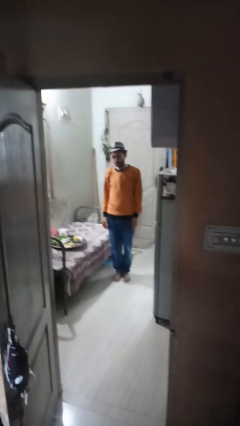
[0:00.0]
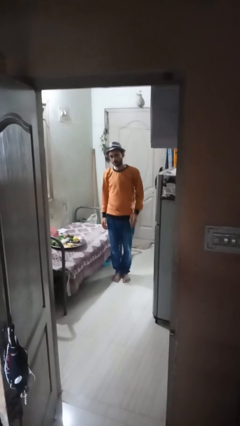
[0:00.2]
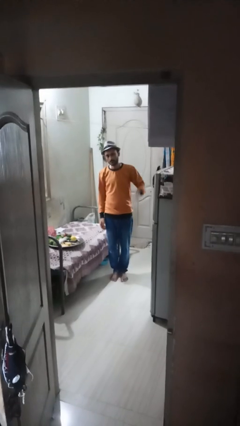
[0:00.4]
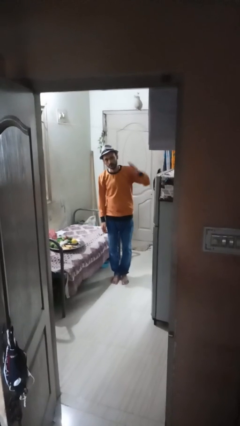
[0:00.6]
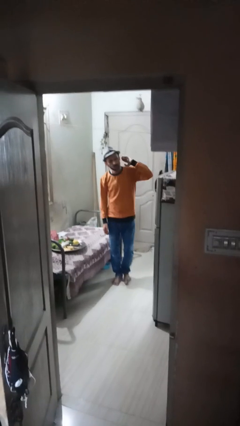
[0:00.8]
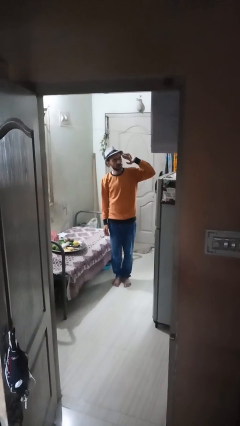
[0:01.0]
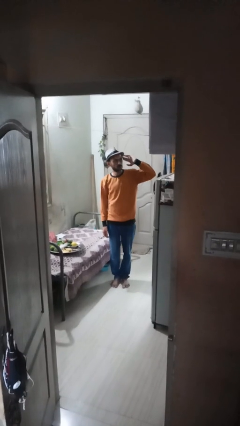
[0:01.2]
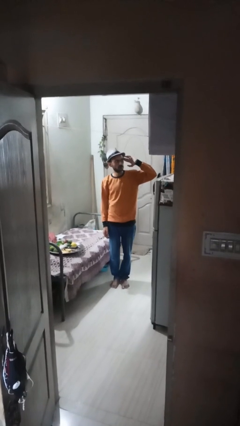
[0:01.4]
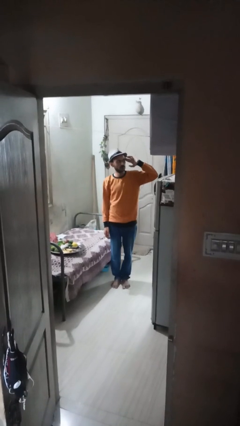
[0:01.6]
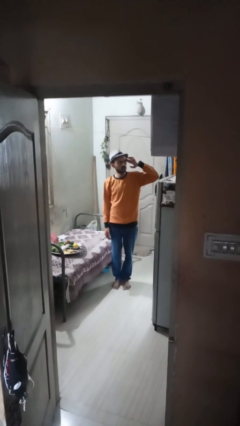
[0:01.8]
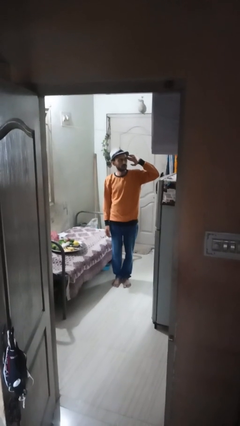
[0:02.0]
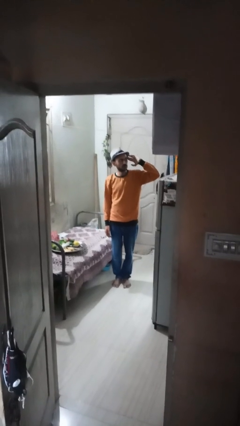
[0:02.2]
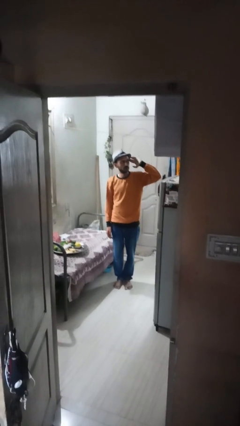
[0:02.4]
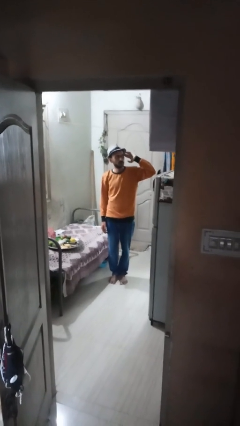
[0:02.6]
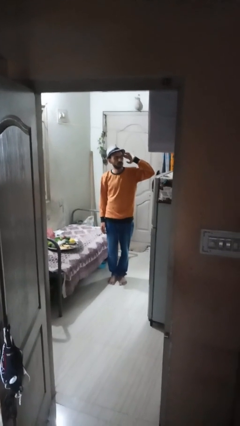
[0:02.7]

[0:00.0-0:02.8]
person salutes

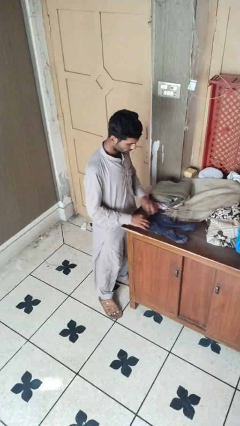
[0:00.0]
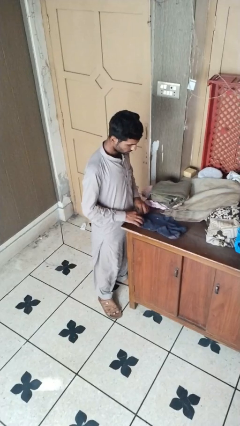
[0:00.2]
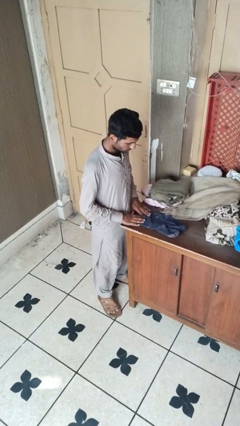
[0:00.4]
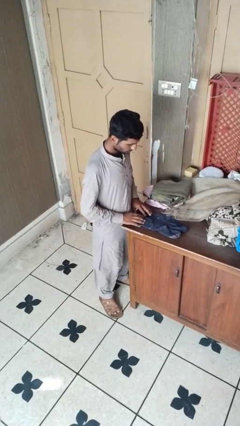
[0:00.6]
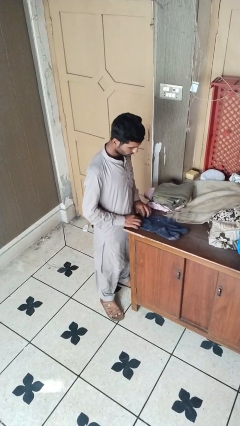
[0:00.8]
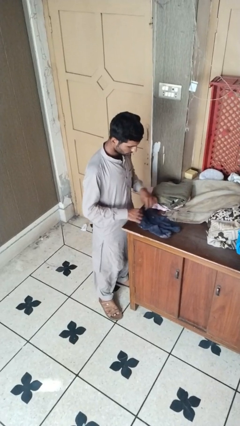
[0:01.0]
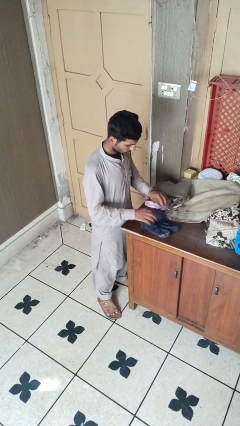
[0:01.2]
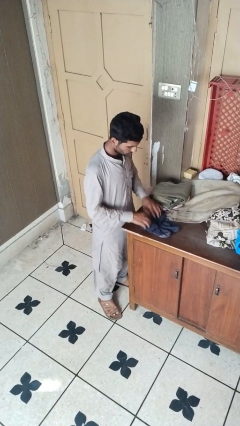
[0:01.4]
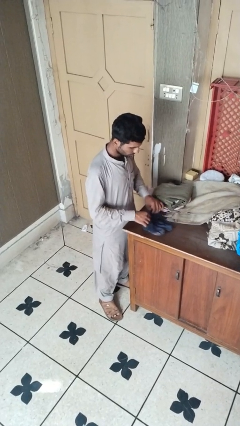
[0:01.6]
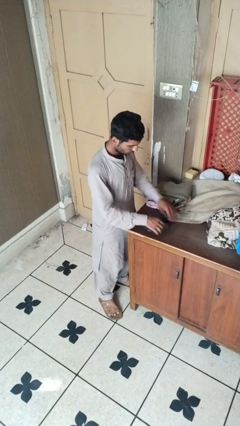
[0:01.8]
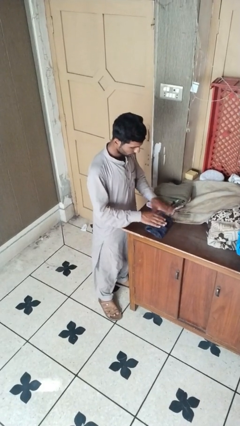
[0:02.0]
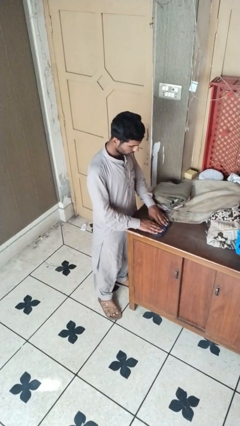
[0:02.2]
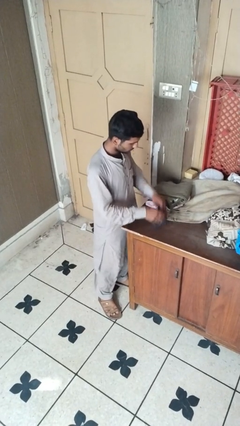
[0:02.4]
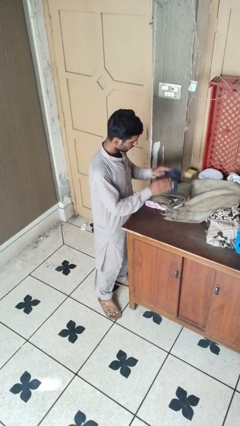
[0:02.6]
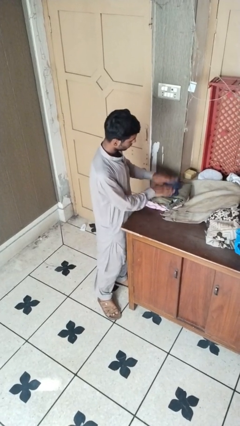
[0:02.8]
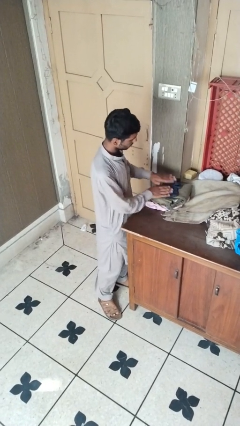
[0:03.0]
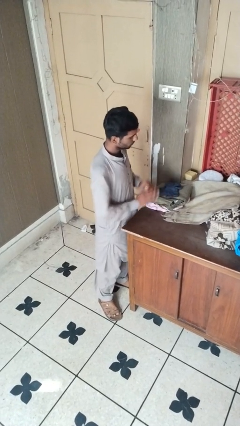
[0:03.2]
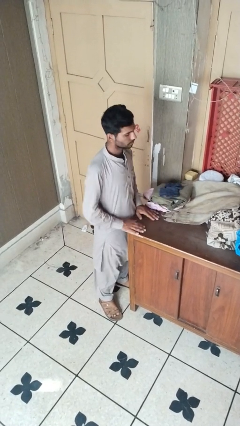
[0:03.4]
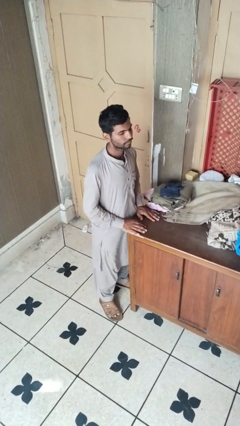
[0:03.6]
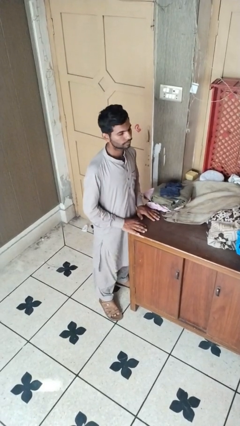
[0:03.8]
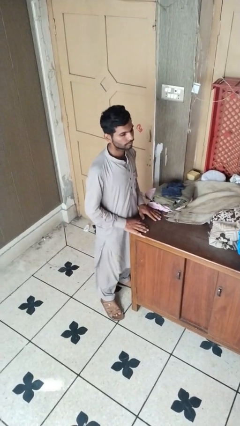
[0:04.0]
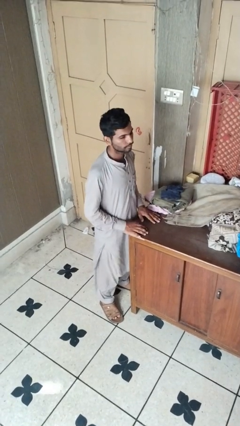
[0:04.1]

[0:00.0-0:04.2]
person folds socks

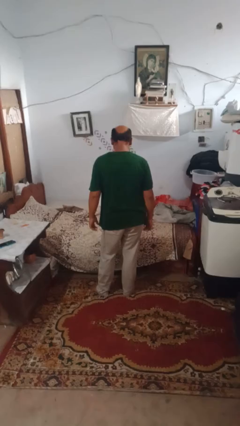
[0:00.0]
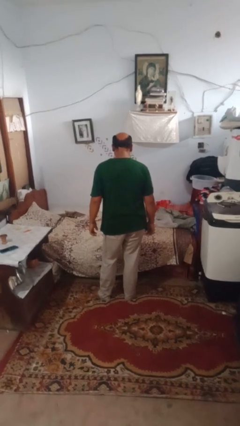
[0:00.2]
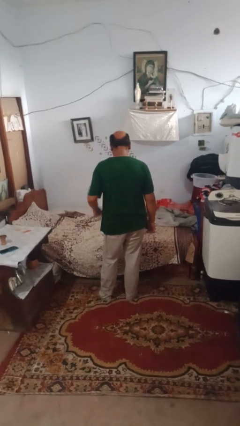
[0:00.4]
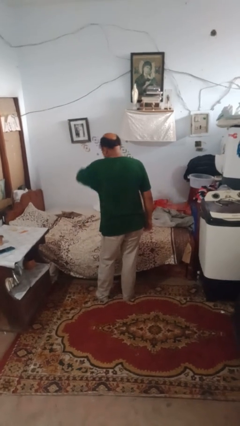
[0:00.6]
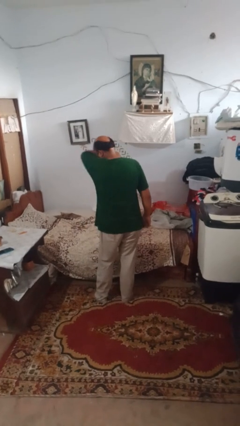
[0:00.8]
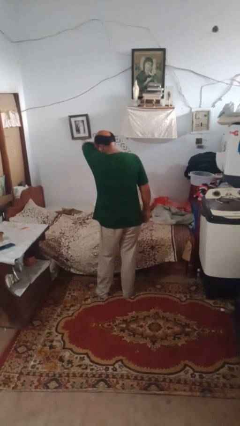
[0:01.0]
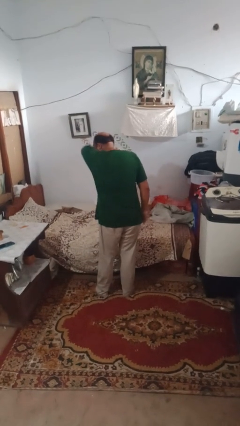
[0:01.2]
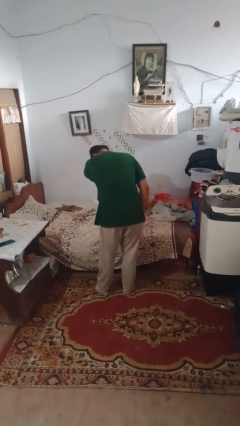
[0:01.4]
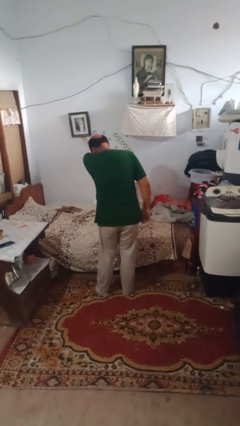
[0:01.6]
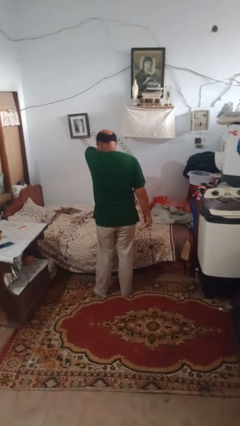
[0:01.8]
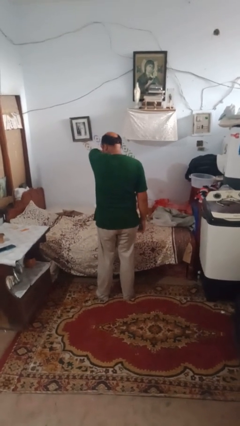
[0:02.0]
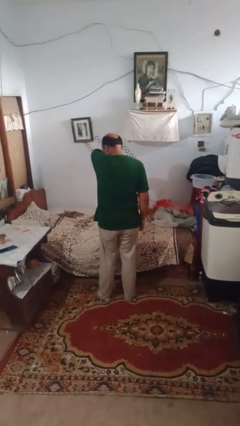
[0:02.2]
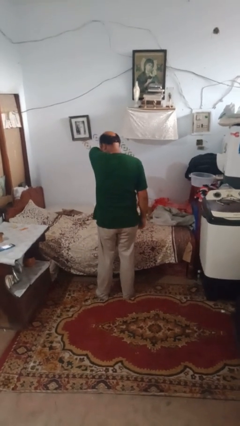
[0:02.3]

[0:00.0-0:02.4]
person sneezes into arm

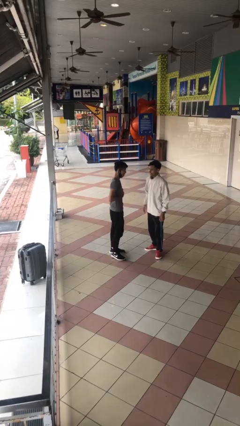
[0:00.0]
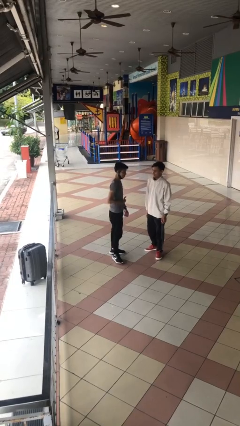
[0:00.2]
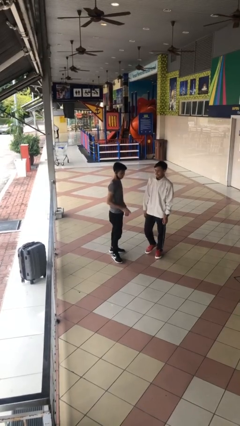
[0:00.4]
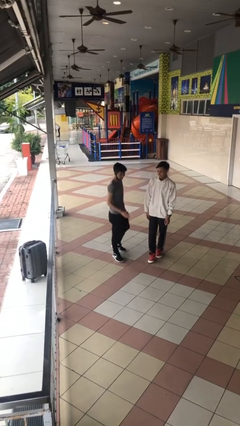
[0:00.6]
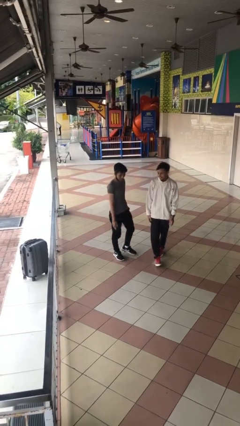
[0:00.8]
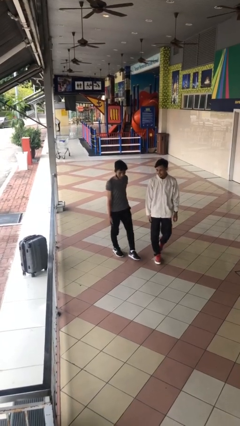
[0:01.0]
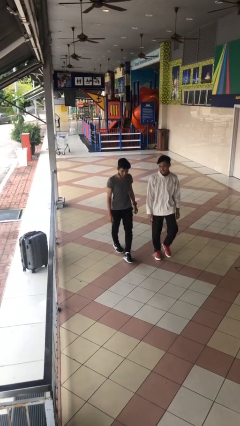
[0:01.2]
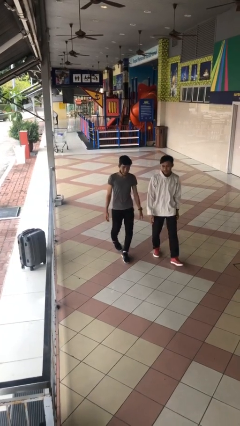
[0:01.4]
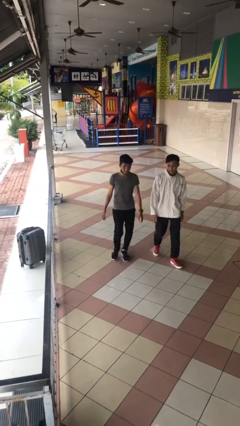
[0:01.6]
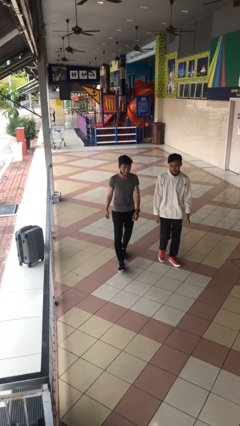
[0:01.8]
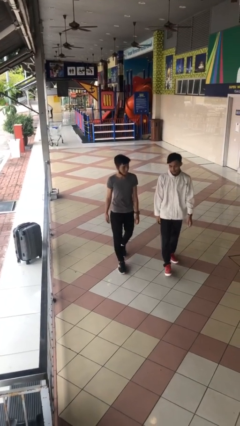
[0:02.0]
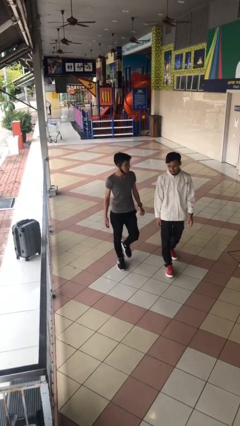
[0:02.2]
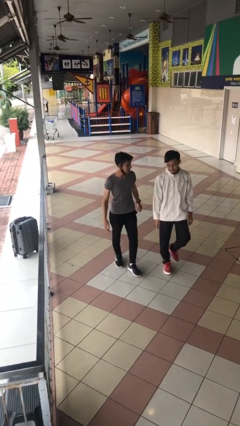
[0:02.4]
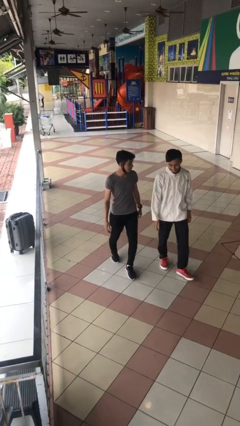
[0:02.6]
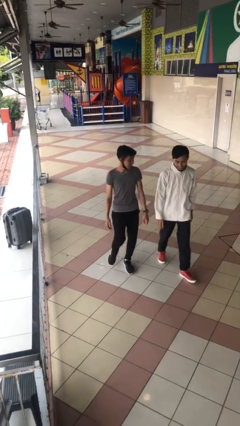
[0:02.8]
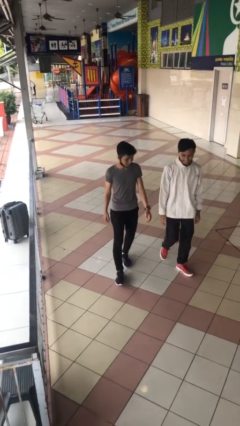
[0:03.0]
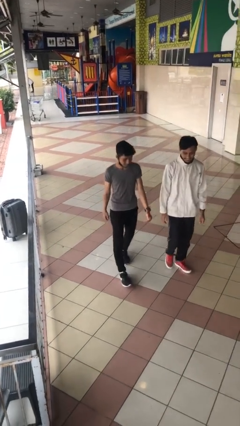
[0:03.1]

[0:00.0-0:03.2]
person talks to person

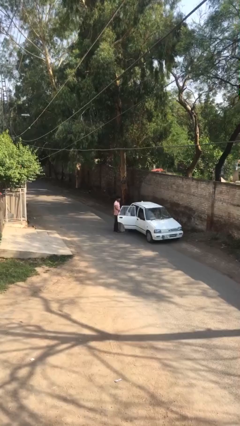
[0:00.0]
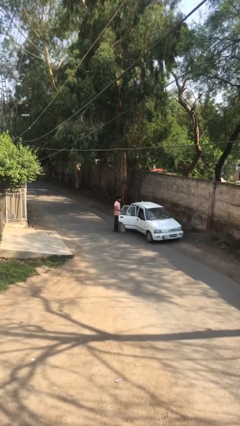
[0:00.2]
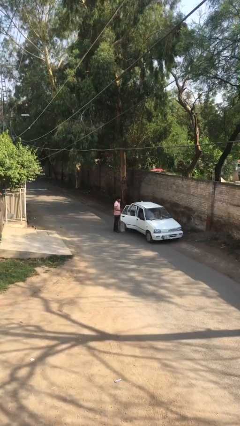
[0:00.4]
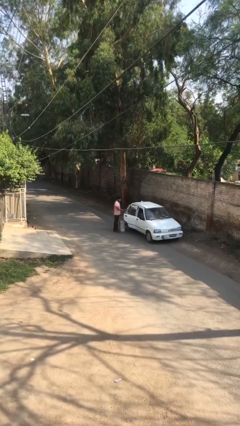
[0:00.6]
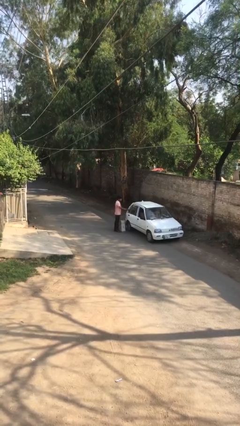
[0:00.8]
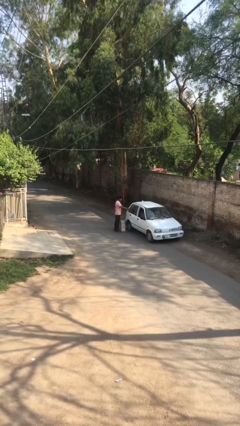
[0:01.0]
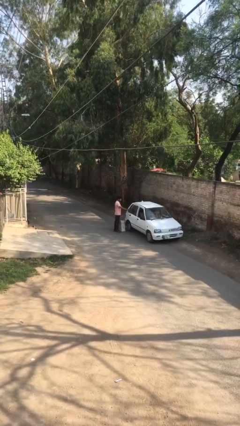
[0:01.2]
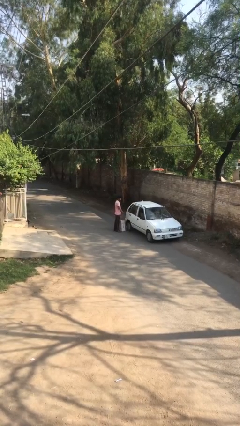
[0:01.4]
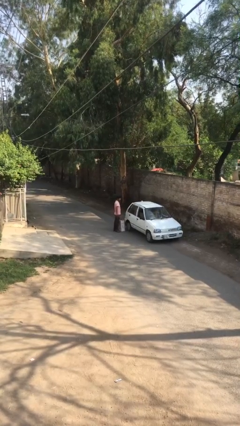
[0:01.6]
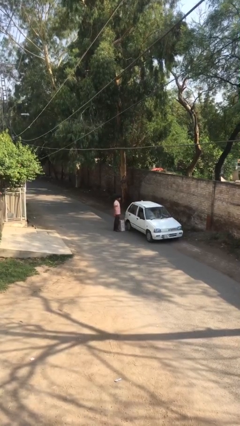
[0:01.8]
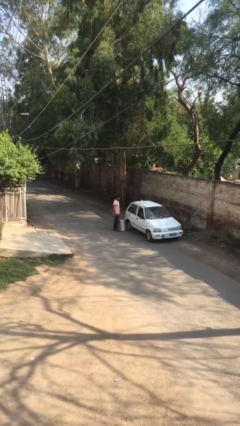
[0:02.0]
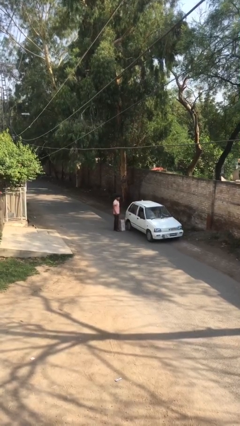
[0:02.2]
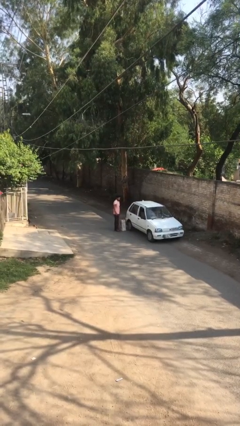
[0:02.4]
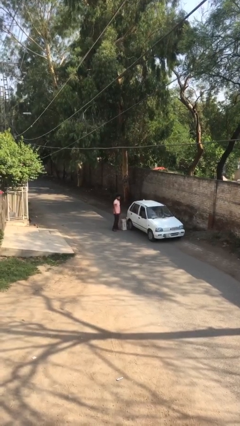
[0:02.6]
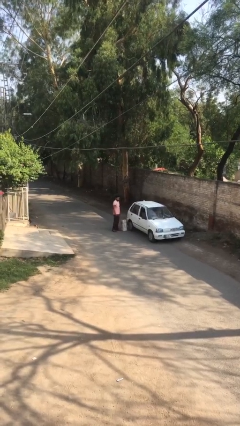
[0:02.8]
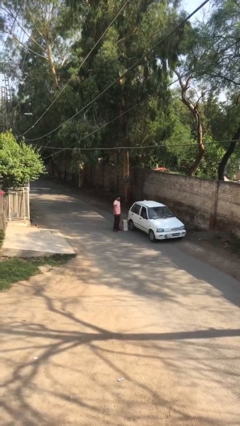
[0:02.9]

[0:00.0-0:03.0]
person closes car door

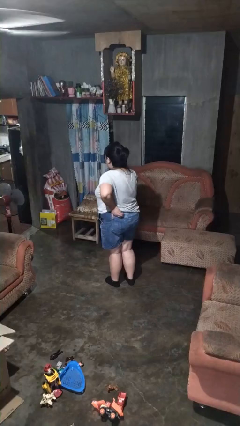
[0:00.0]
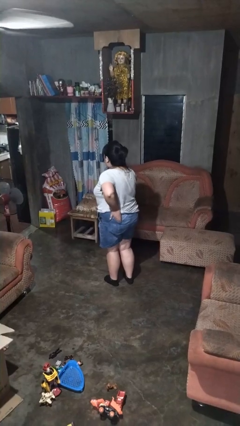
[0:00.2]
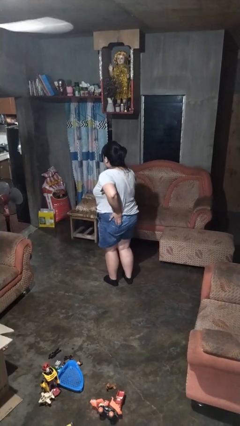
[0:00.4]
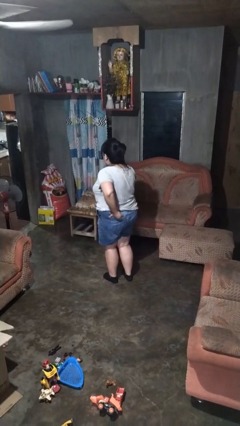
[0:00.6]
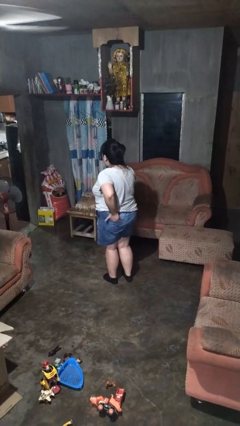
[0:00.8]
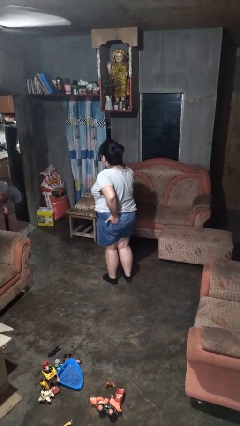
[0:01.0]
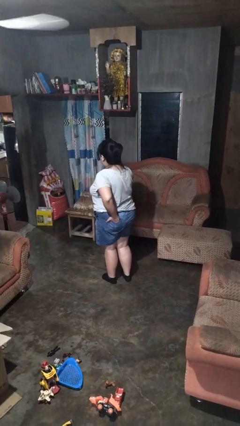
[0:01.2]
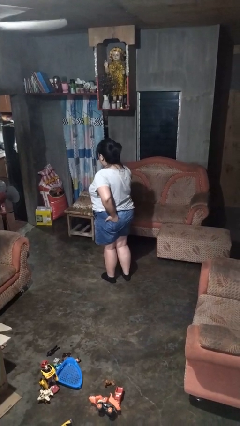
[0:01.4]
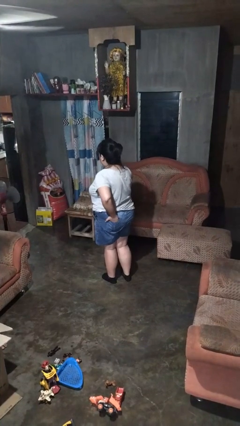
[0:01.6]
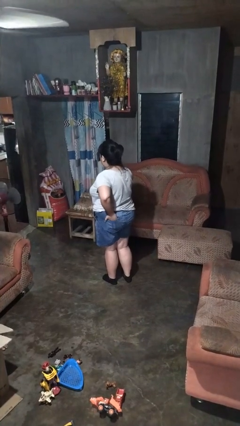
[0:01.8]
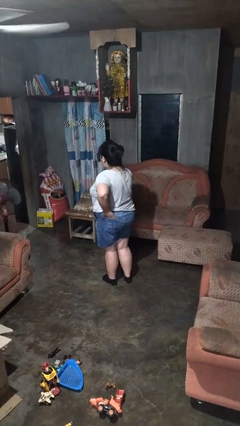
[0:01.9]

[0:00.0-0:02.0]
person puts hands in back pockets
